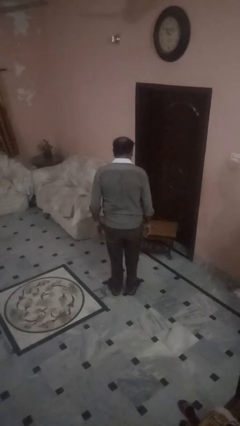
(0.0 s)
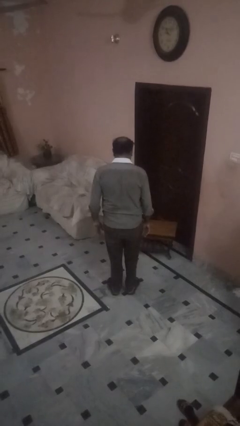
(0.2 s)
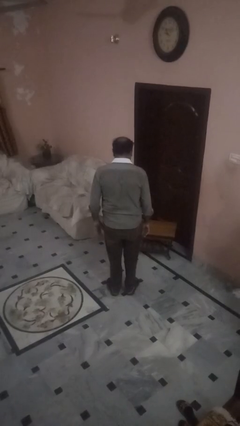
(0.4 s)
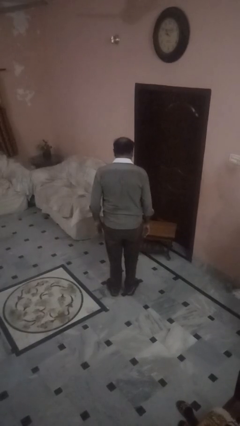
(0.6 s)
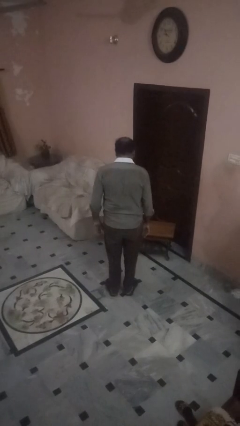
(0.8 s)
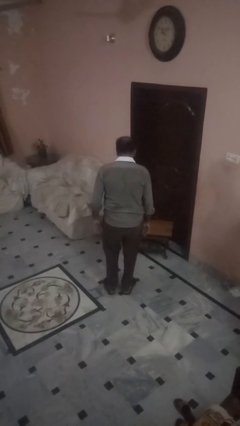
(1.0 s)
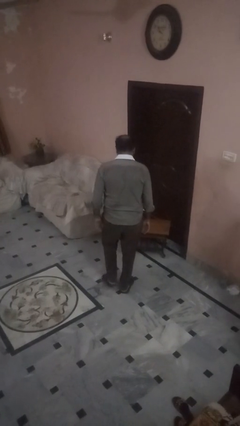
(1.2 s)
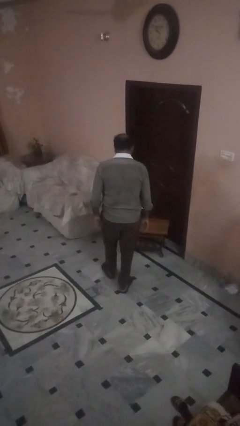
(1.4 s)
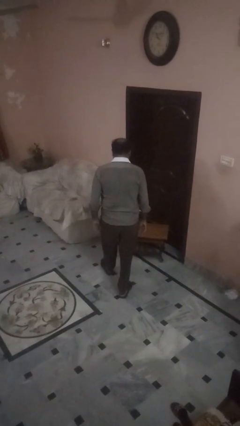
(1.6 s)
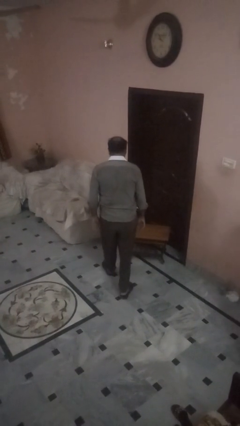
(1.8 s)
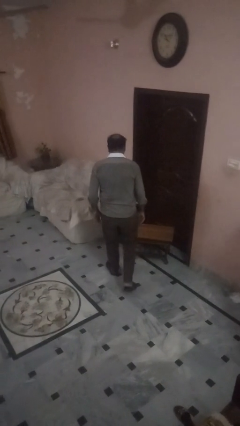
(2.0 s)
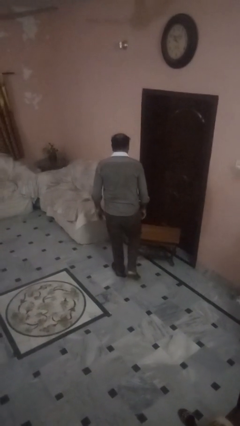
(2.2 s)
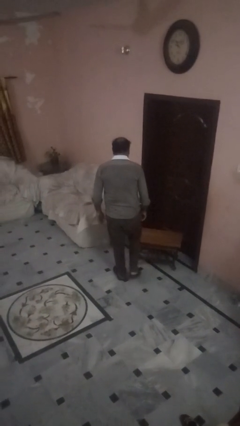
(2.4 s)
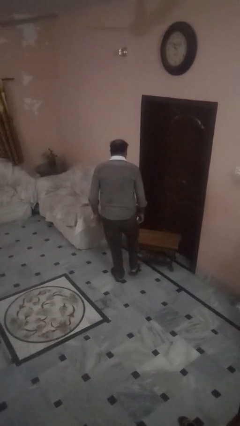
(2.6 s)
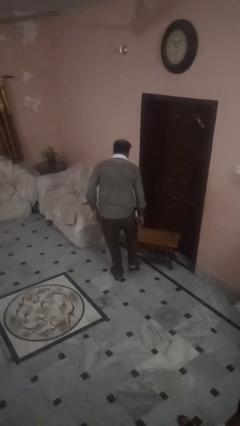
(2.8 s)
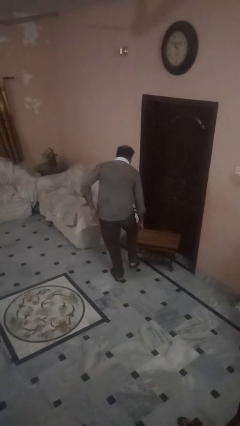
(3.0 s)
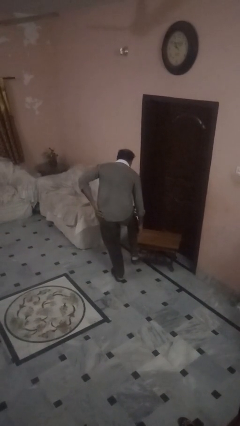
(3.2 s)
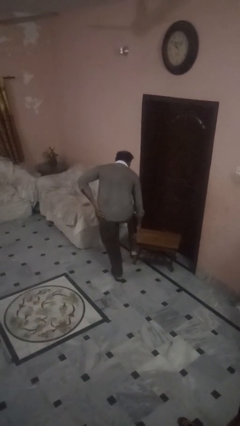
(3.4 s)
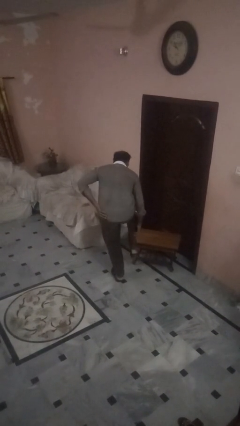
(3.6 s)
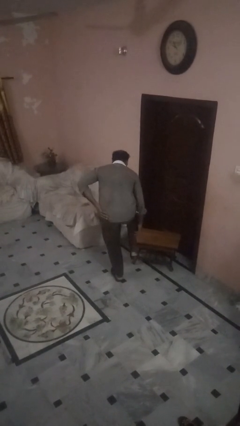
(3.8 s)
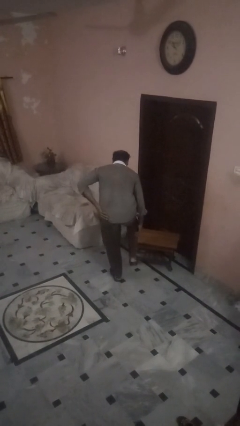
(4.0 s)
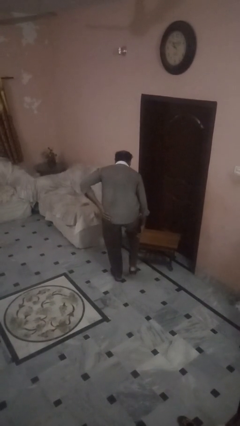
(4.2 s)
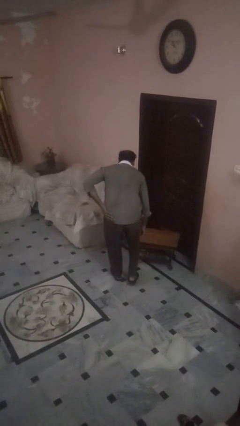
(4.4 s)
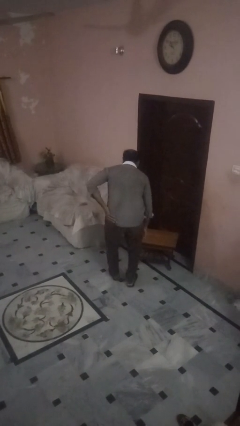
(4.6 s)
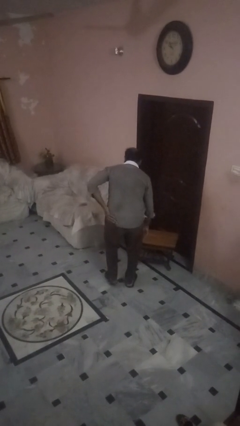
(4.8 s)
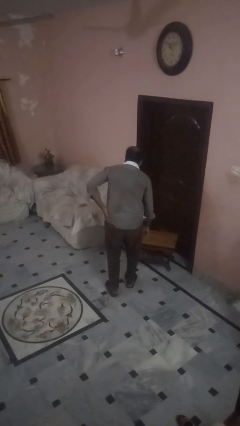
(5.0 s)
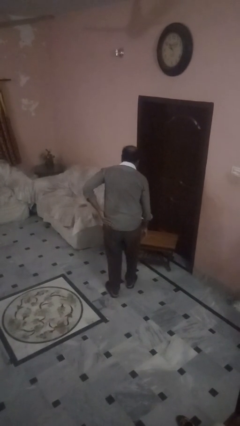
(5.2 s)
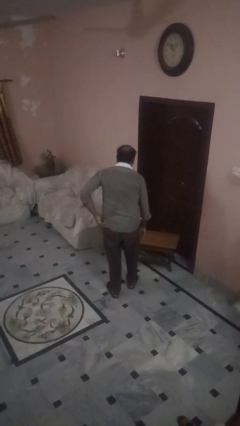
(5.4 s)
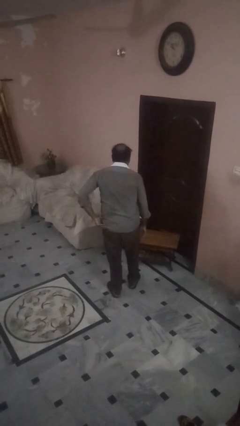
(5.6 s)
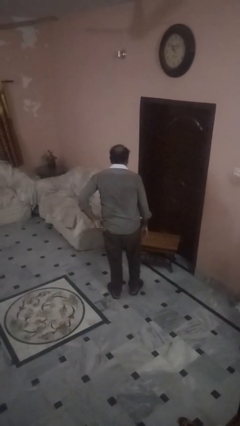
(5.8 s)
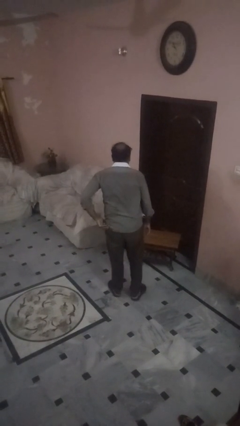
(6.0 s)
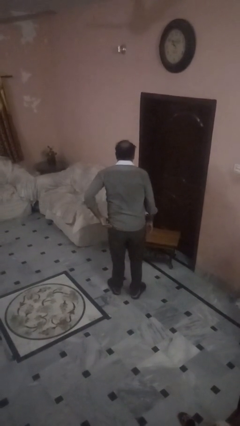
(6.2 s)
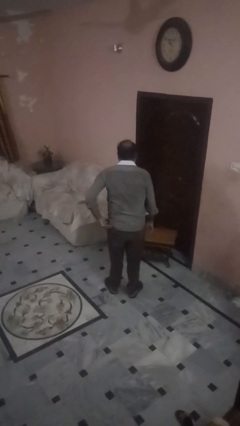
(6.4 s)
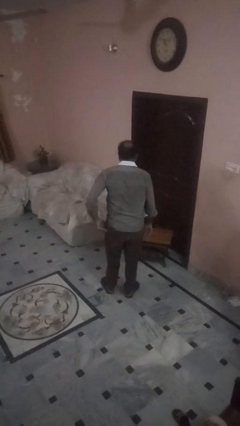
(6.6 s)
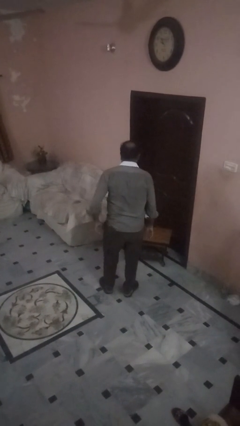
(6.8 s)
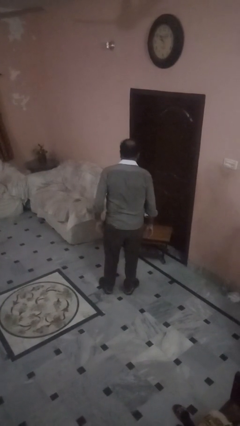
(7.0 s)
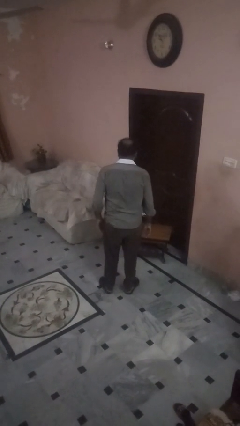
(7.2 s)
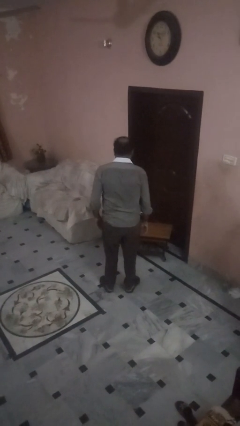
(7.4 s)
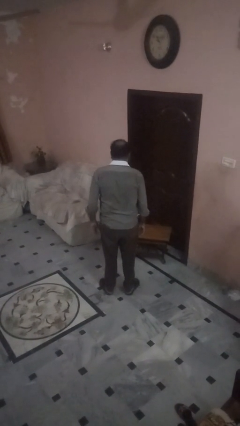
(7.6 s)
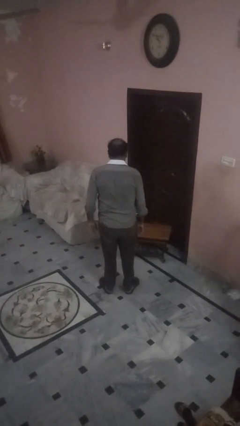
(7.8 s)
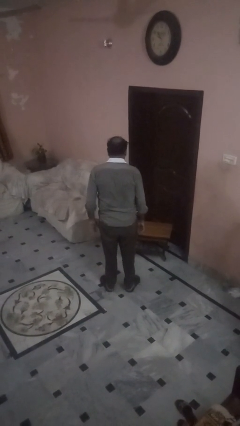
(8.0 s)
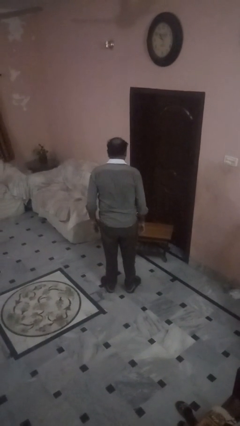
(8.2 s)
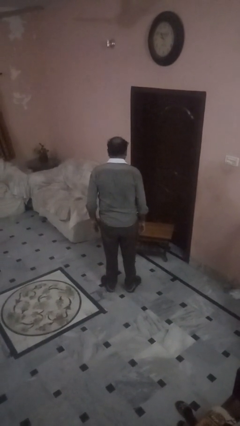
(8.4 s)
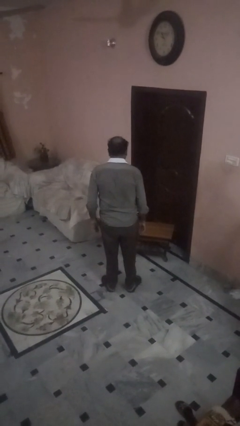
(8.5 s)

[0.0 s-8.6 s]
person bumps into table

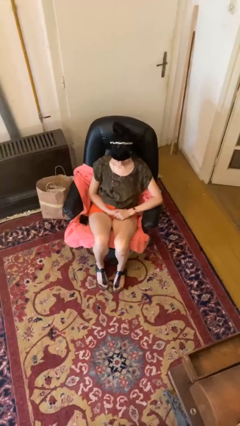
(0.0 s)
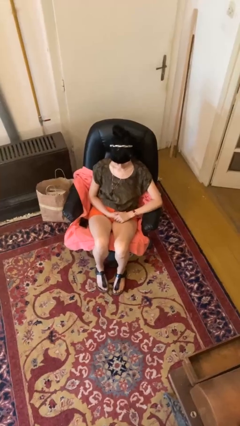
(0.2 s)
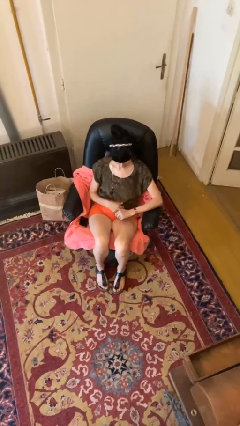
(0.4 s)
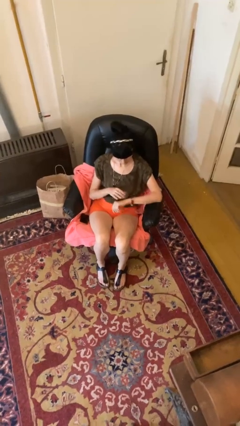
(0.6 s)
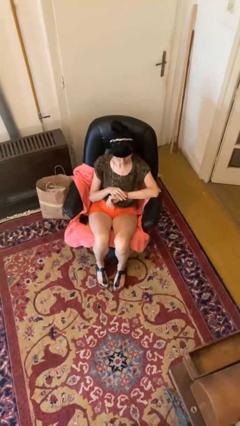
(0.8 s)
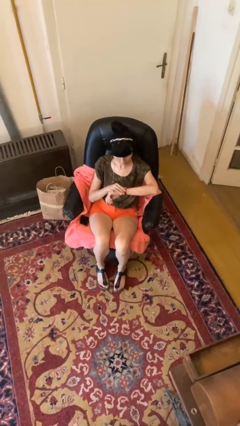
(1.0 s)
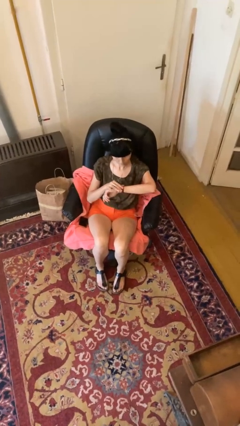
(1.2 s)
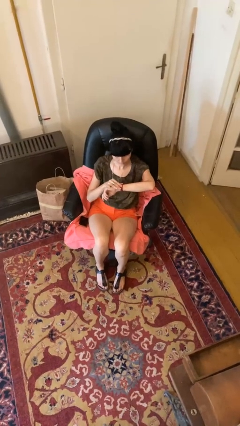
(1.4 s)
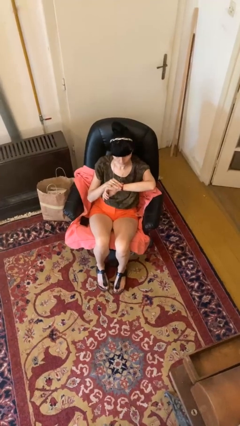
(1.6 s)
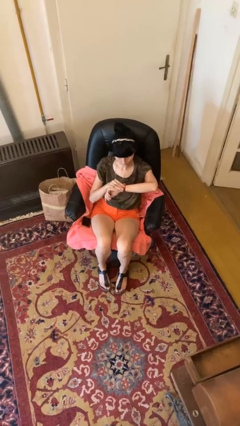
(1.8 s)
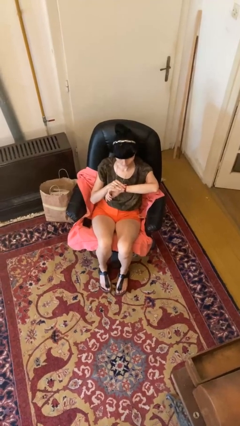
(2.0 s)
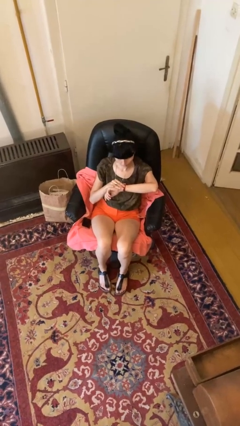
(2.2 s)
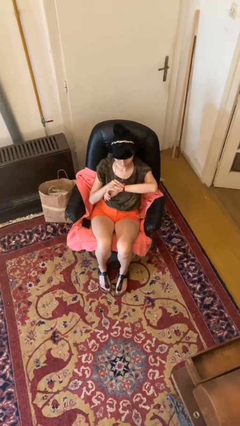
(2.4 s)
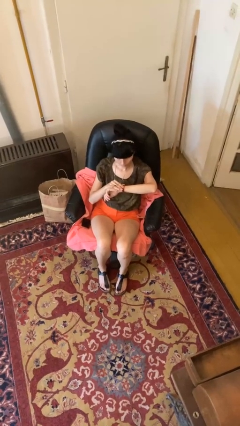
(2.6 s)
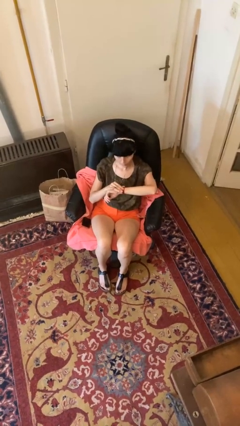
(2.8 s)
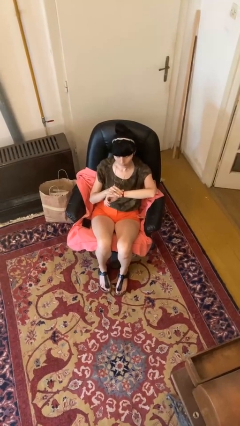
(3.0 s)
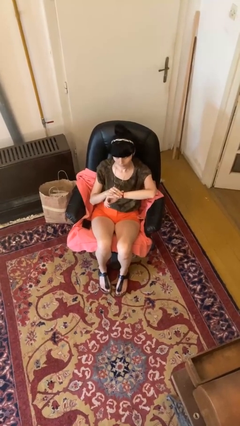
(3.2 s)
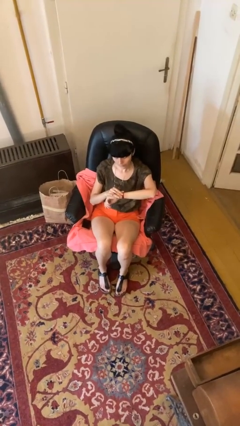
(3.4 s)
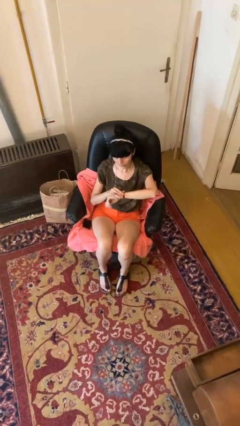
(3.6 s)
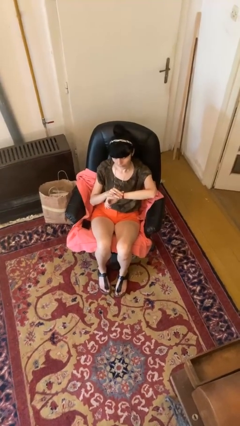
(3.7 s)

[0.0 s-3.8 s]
person looks at wristwatch

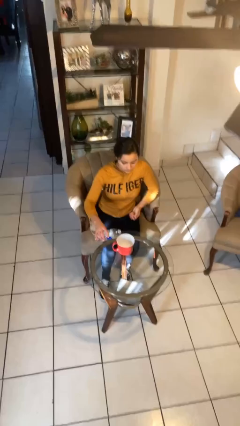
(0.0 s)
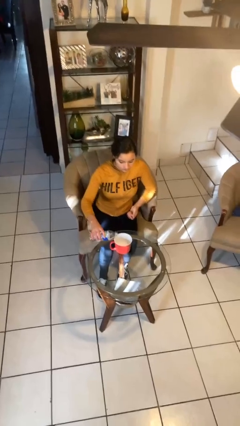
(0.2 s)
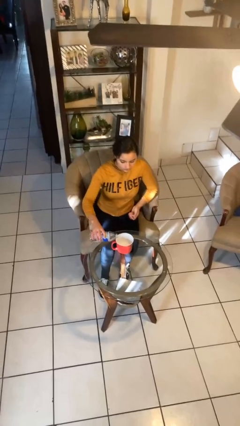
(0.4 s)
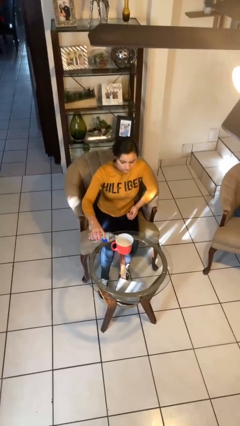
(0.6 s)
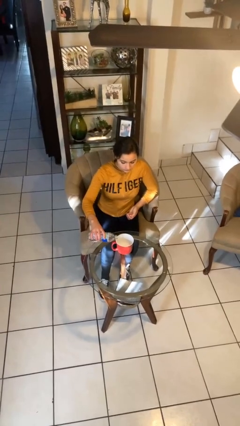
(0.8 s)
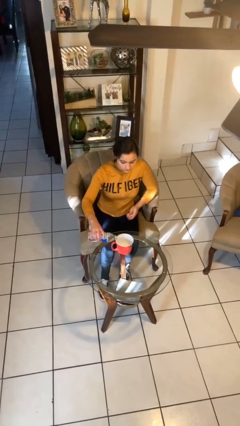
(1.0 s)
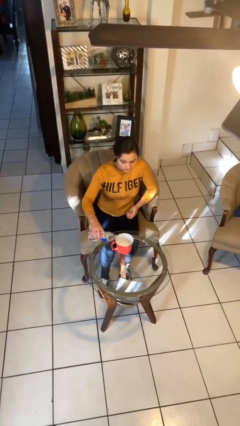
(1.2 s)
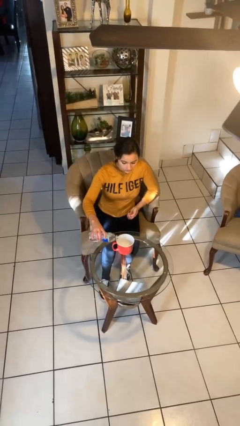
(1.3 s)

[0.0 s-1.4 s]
person pours liquid into cup

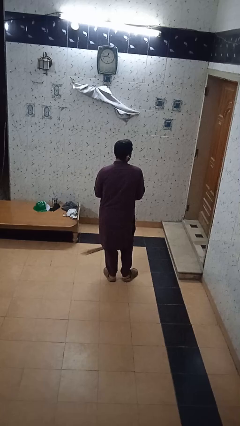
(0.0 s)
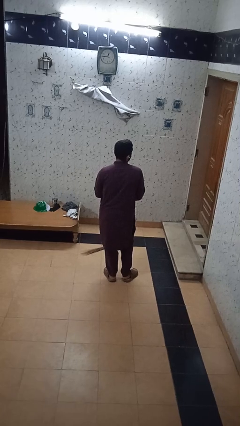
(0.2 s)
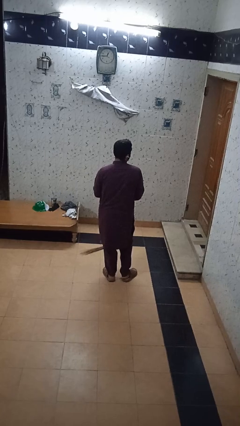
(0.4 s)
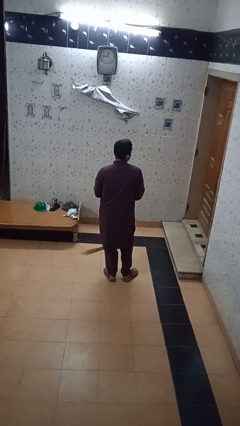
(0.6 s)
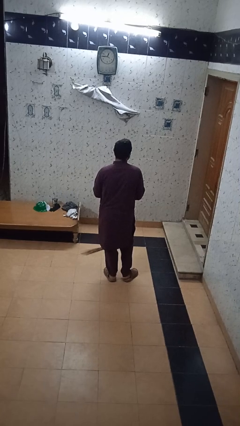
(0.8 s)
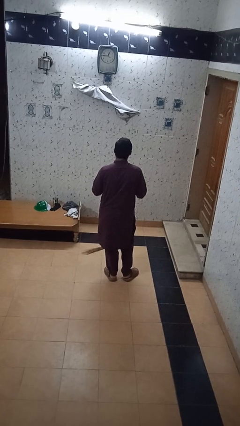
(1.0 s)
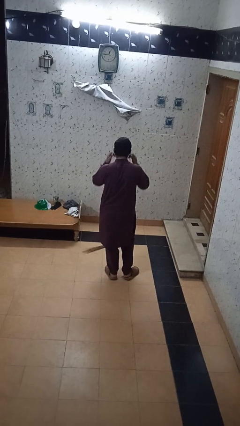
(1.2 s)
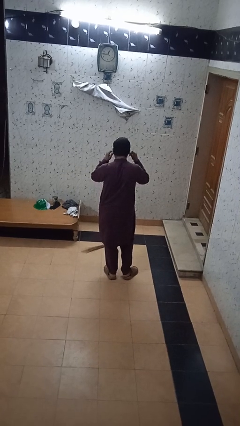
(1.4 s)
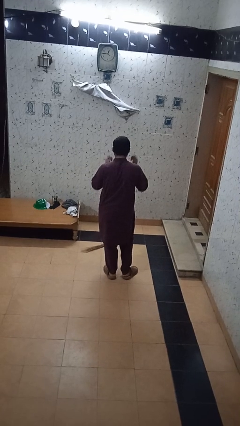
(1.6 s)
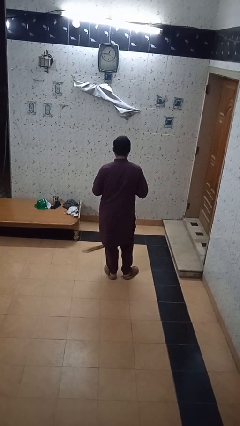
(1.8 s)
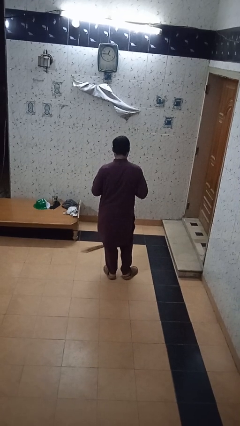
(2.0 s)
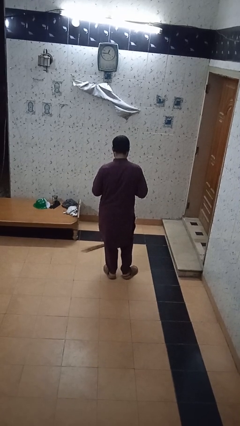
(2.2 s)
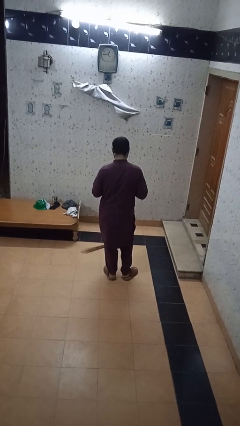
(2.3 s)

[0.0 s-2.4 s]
person takes off headphones

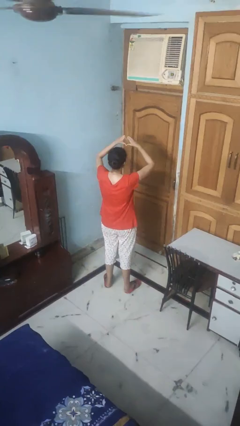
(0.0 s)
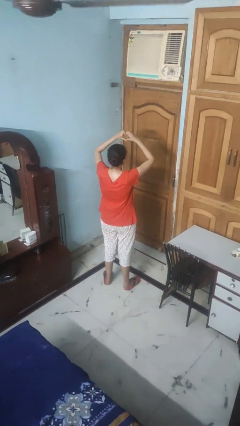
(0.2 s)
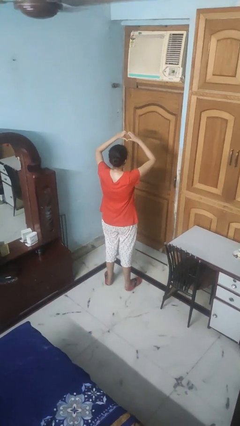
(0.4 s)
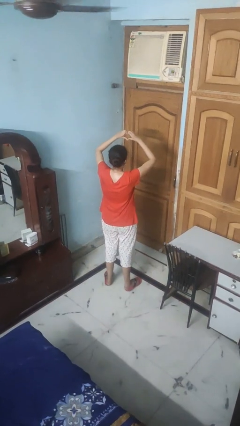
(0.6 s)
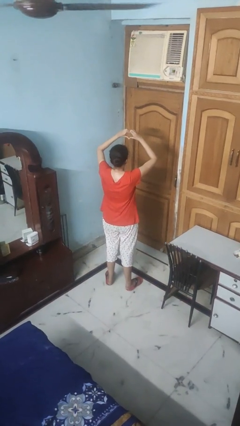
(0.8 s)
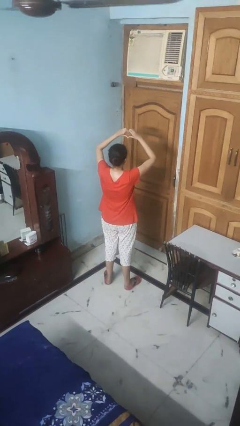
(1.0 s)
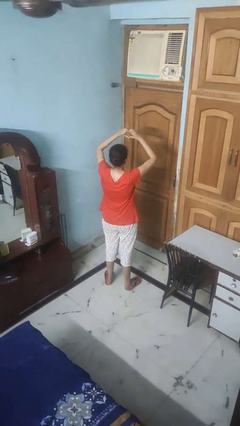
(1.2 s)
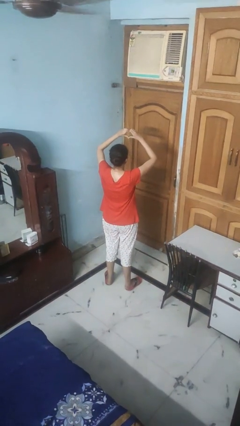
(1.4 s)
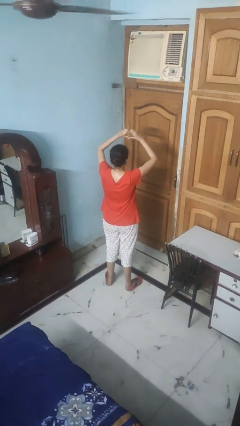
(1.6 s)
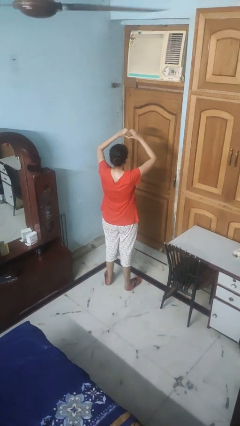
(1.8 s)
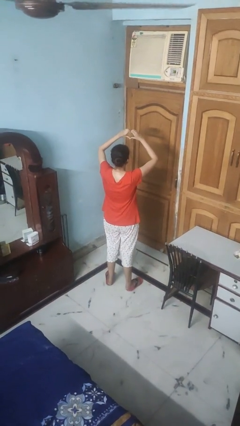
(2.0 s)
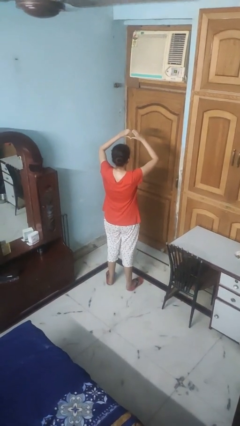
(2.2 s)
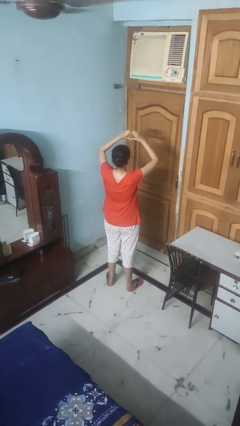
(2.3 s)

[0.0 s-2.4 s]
person gestures heart
